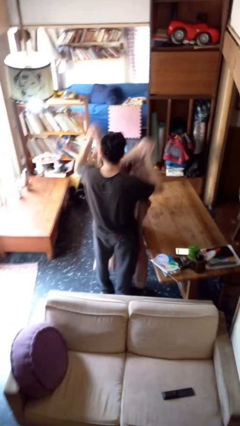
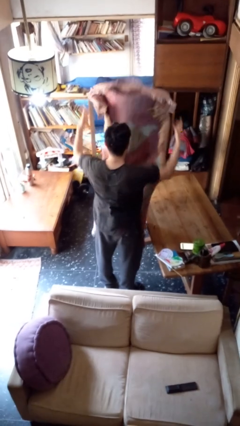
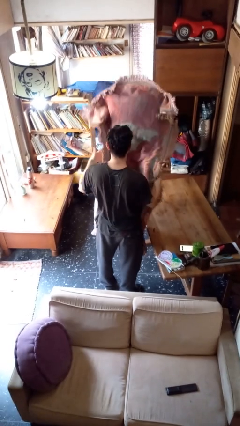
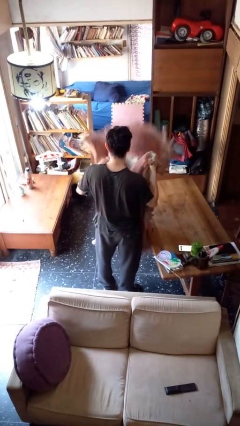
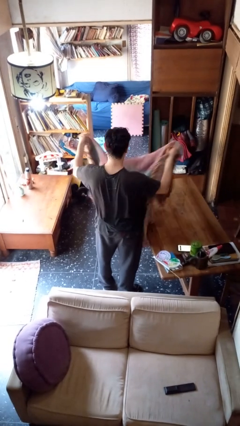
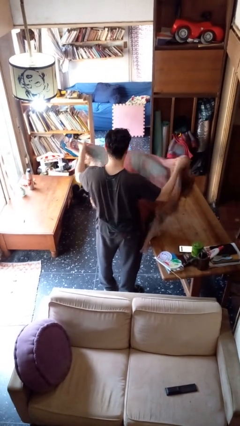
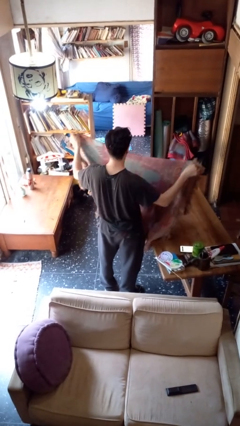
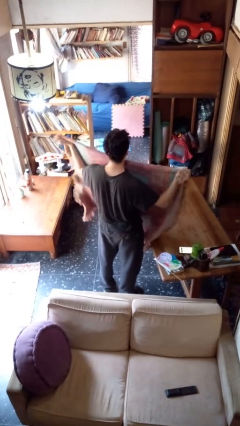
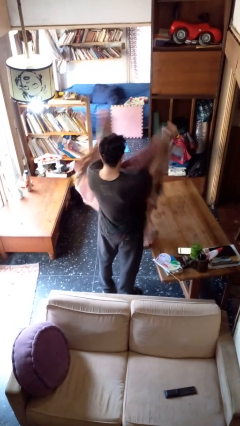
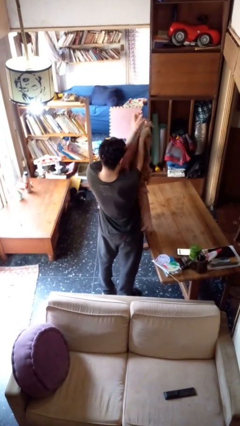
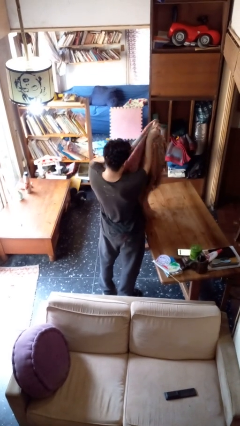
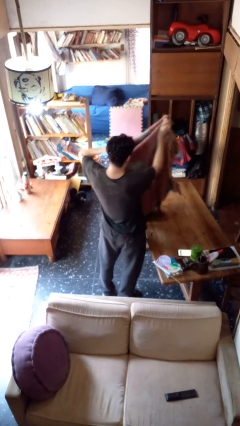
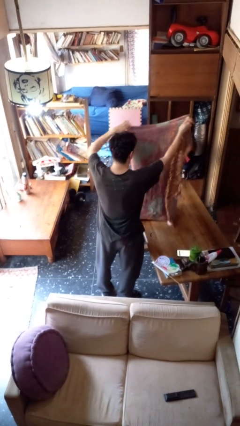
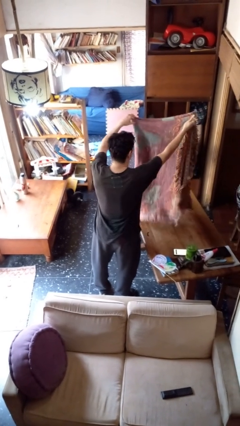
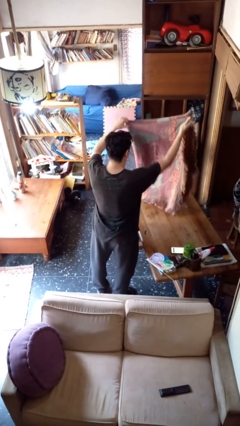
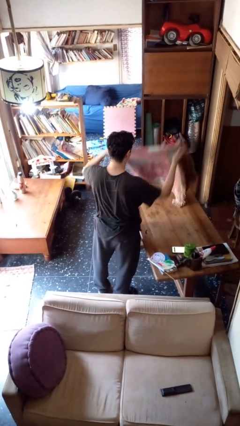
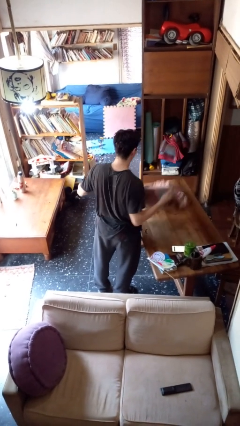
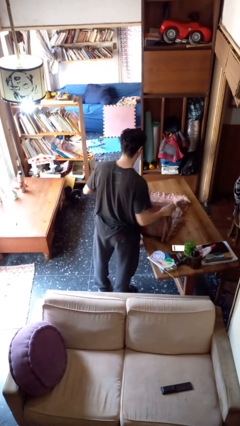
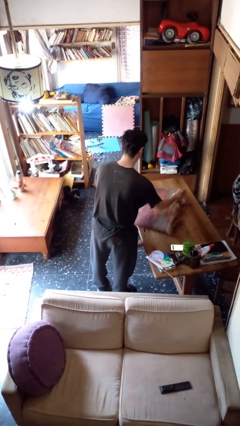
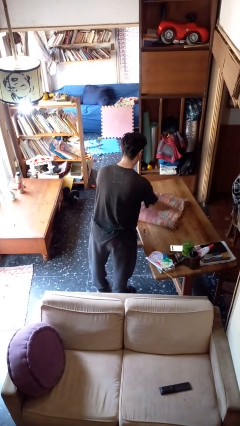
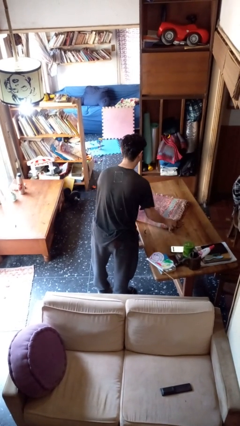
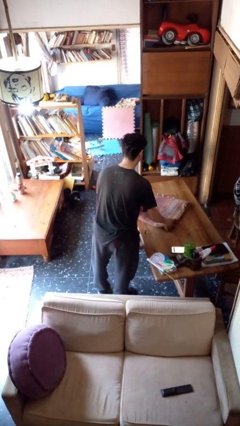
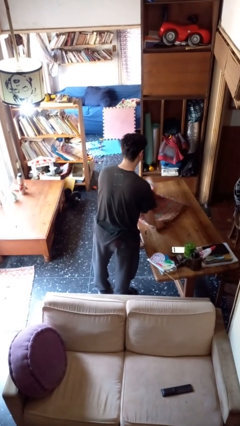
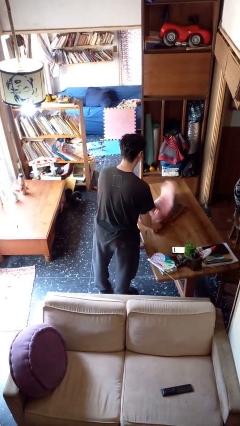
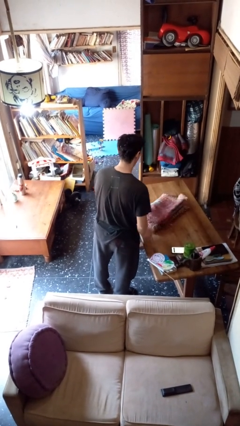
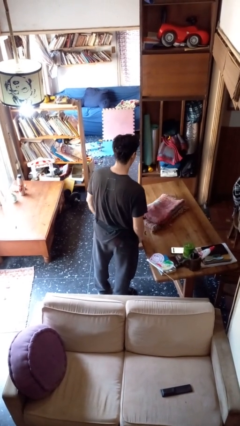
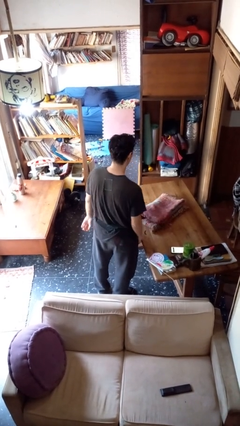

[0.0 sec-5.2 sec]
person folds blanket

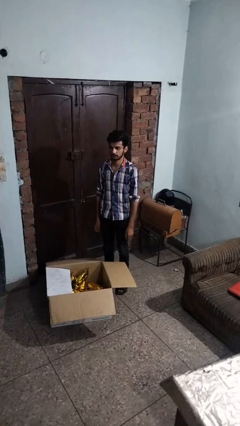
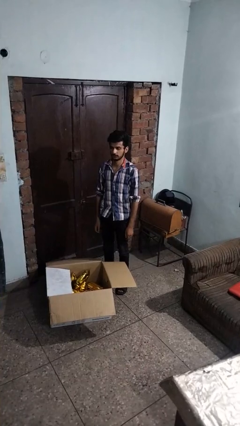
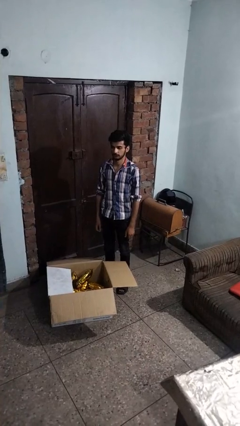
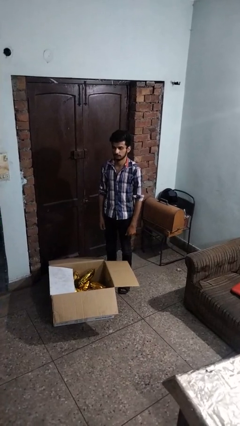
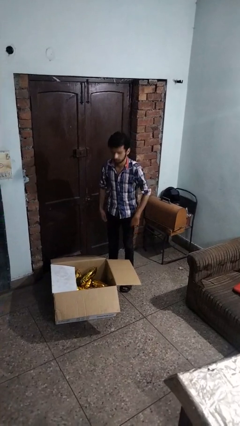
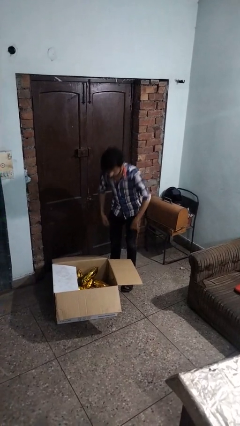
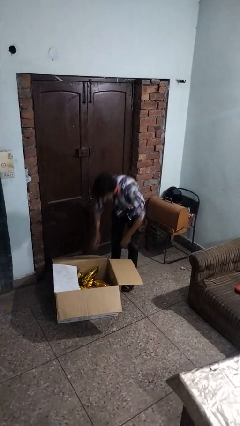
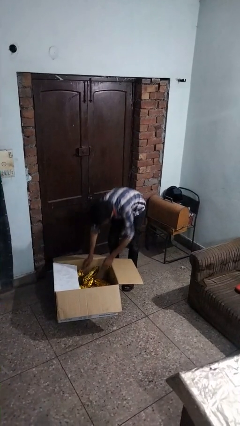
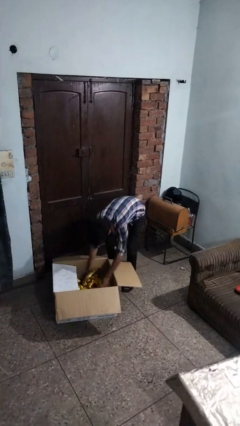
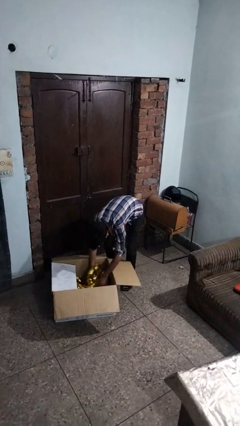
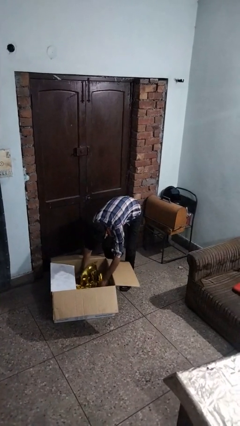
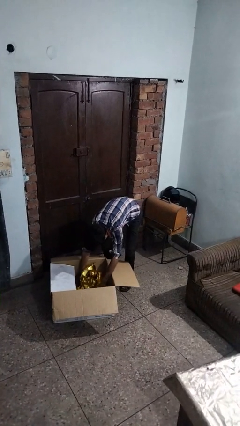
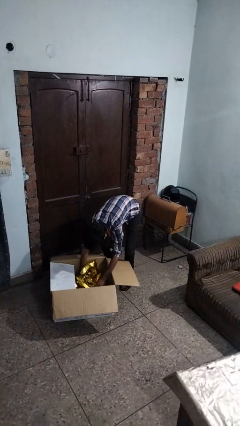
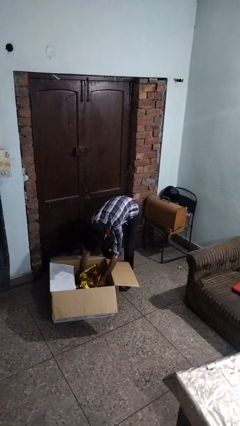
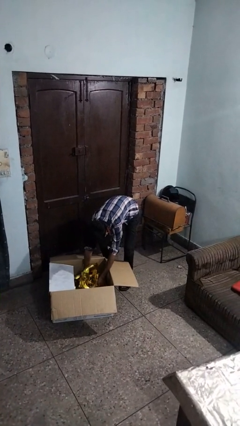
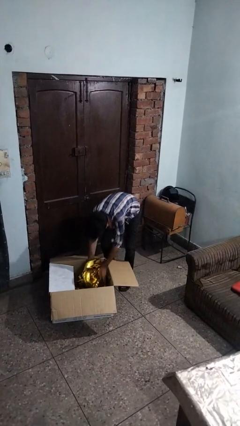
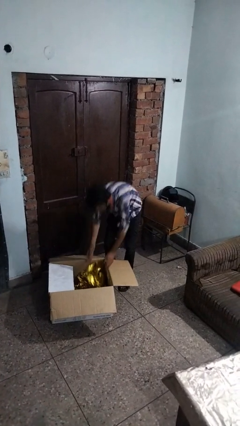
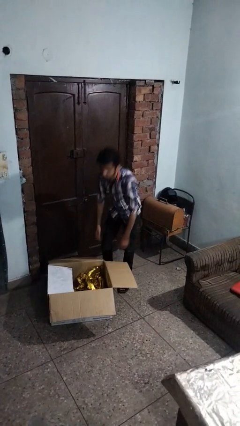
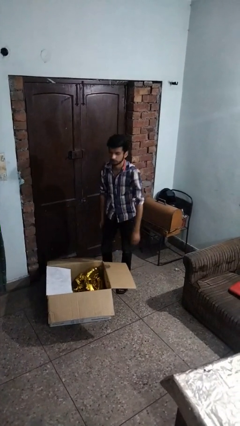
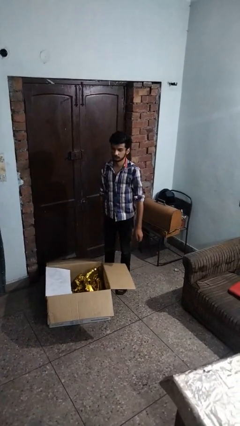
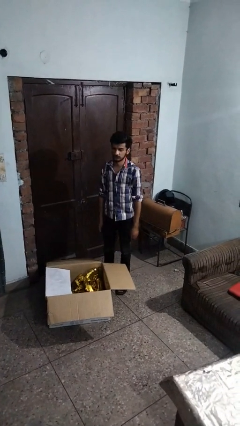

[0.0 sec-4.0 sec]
person searches in box

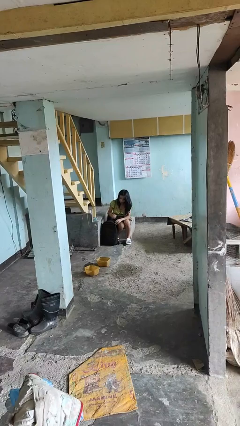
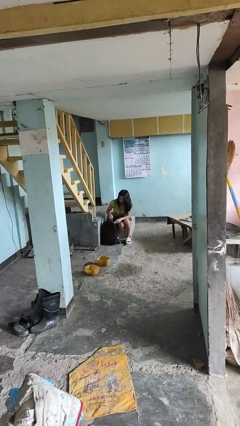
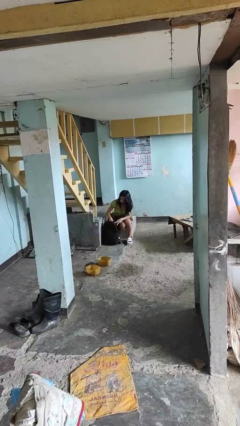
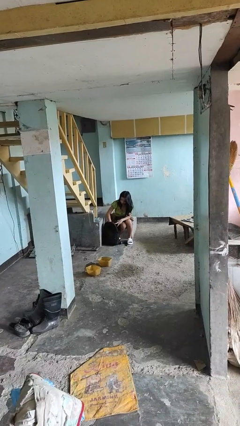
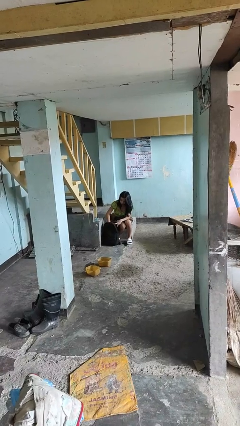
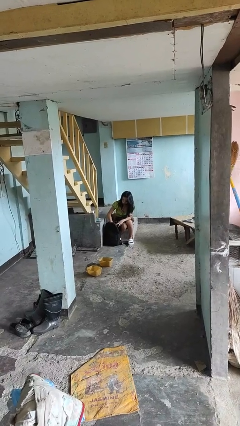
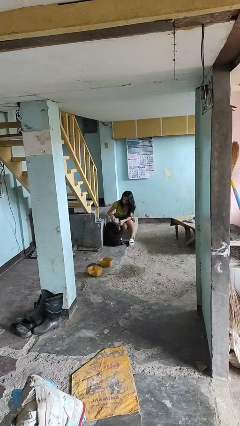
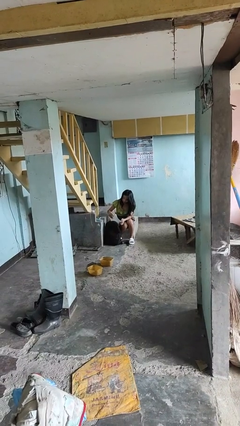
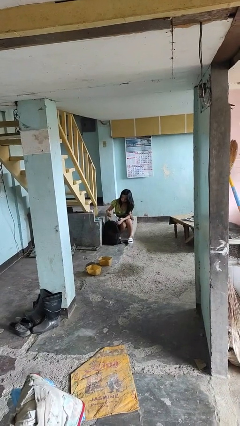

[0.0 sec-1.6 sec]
person searches in backpack

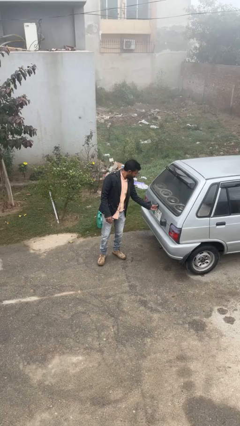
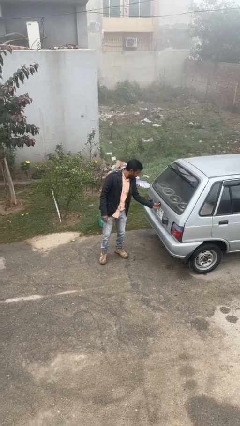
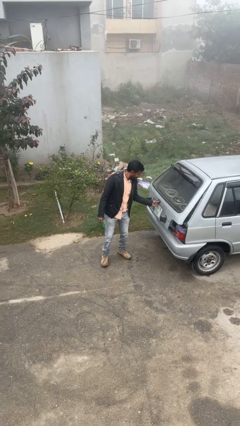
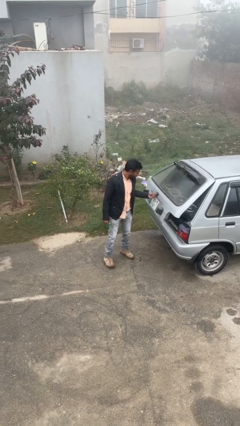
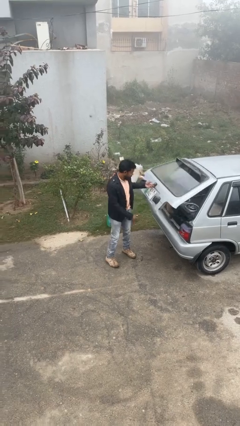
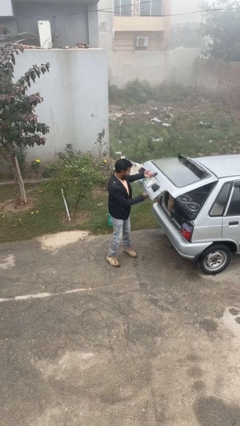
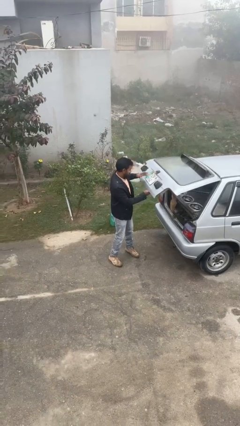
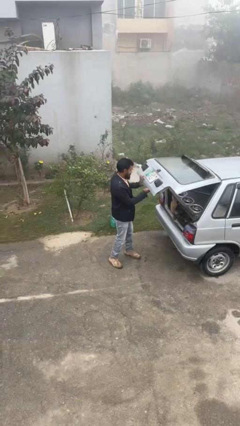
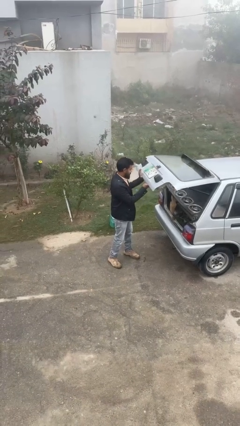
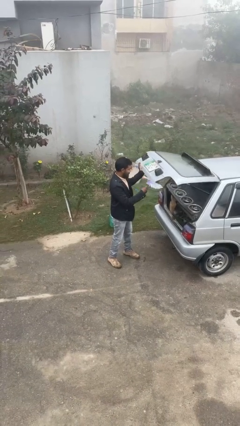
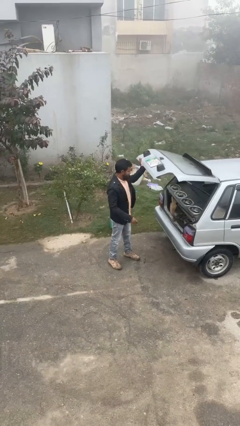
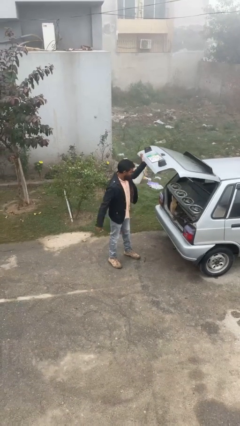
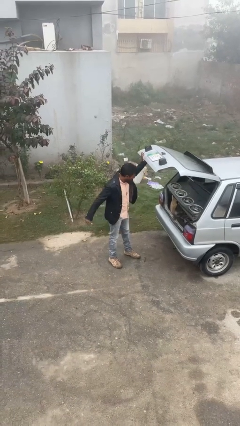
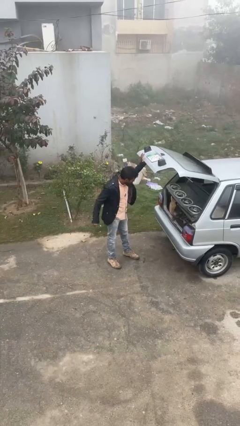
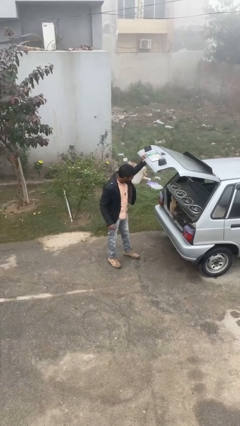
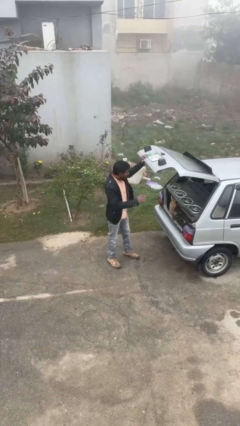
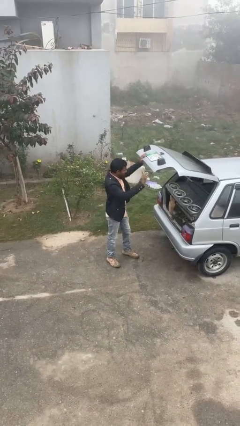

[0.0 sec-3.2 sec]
person opens car trunk

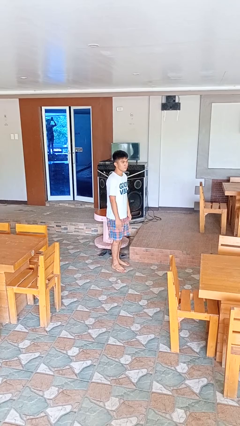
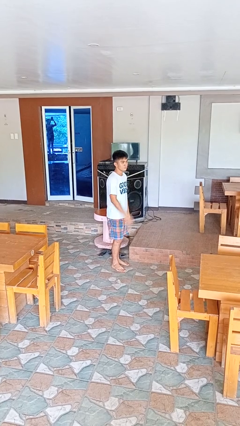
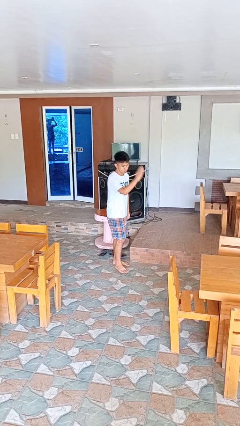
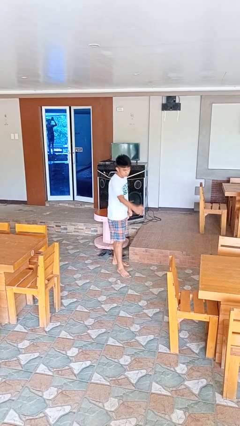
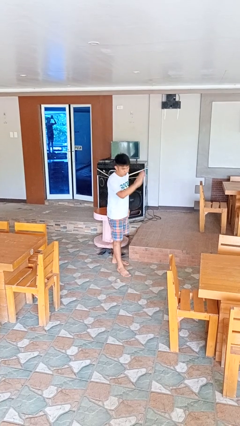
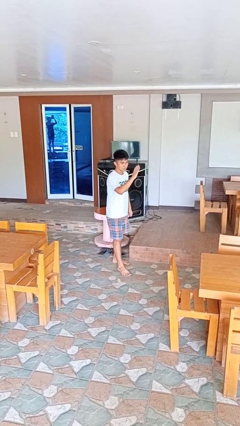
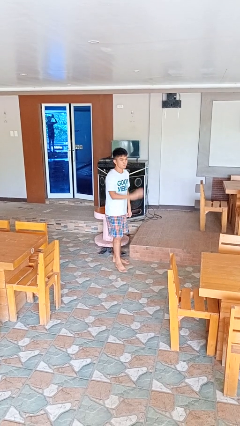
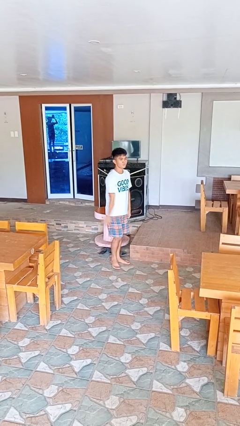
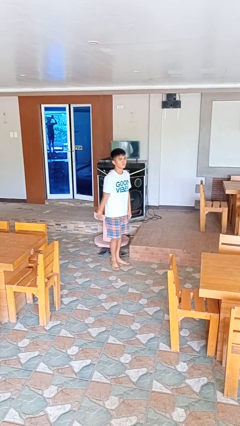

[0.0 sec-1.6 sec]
person karate chop

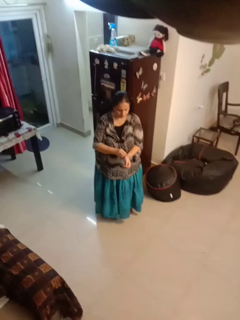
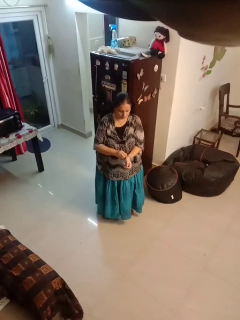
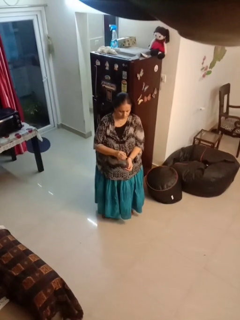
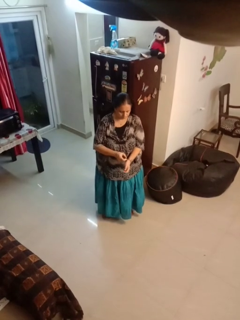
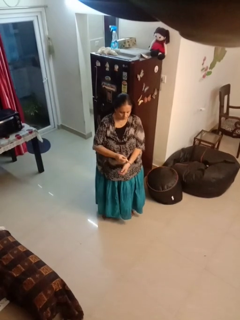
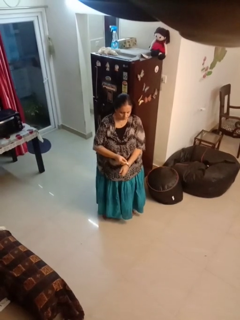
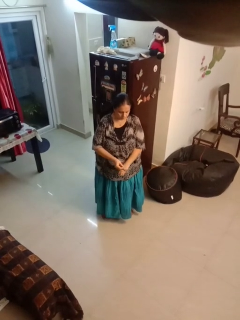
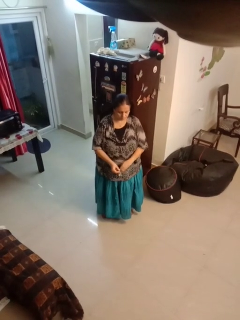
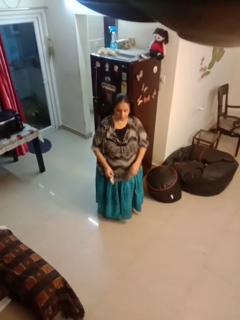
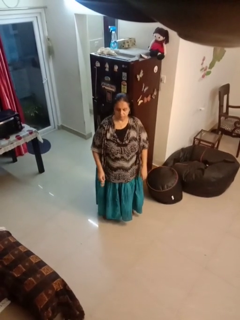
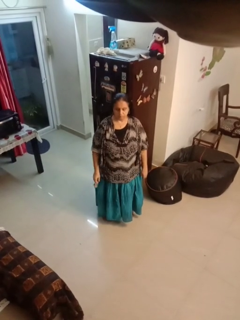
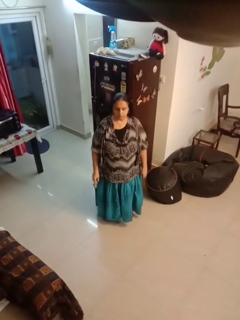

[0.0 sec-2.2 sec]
person takes off wristwatch

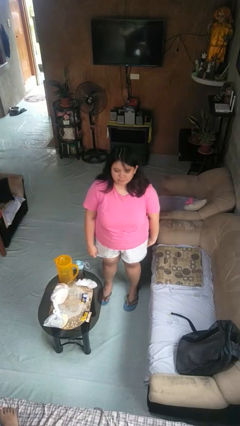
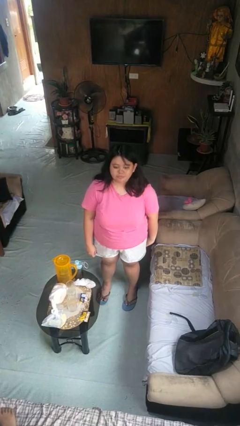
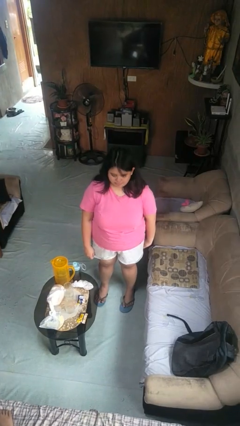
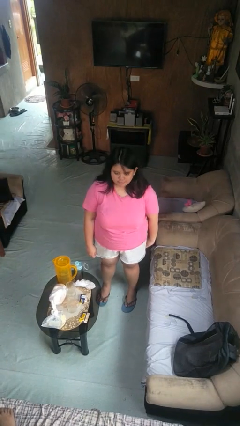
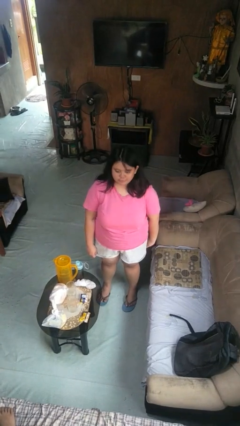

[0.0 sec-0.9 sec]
person nods head
